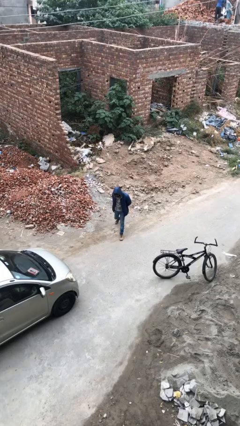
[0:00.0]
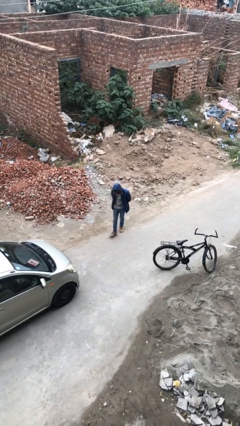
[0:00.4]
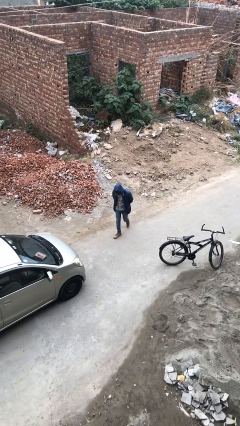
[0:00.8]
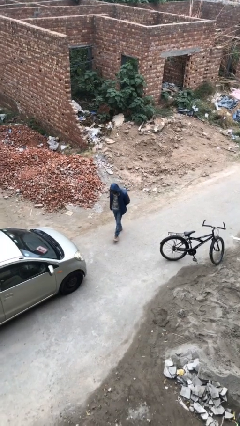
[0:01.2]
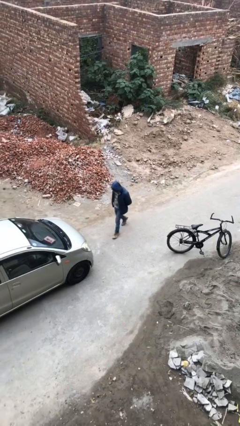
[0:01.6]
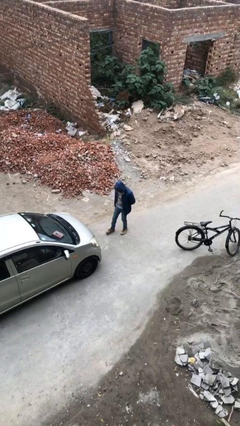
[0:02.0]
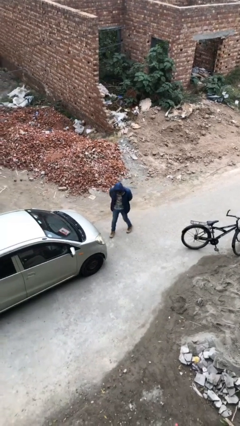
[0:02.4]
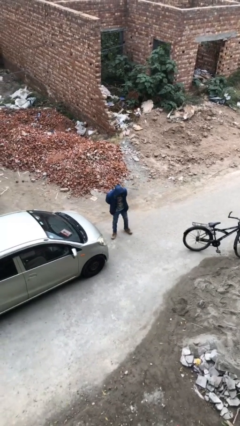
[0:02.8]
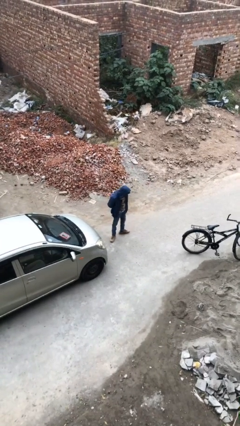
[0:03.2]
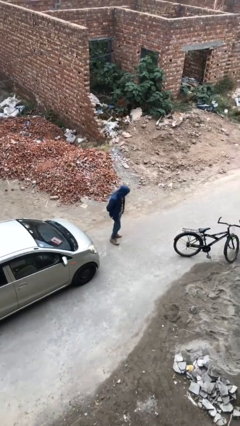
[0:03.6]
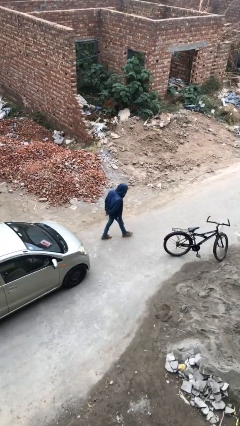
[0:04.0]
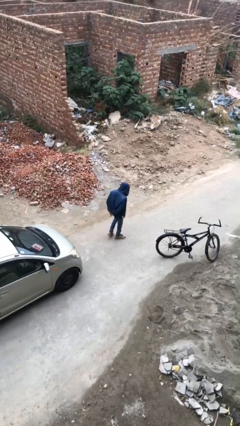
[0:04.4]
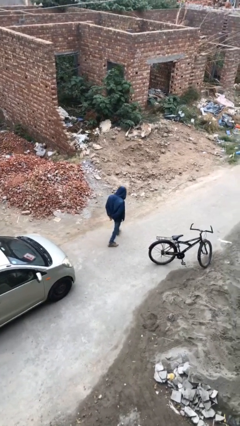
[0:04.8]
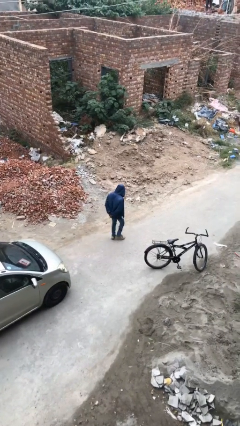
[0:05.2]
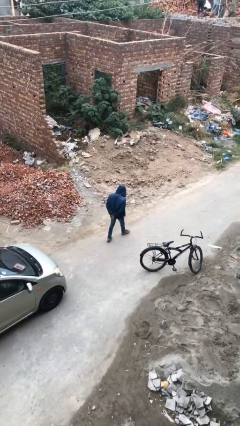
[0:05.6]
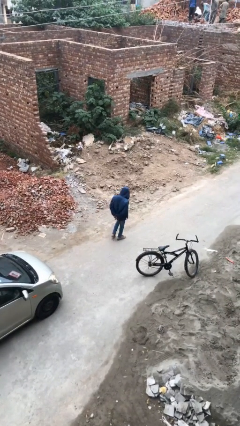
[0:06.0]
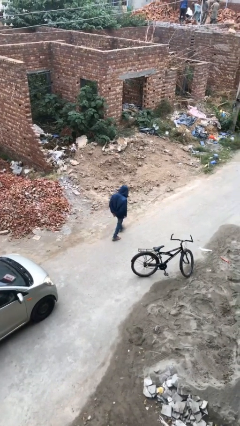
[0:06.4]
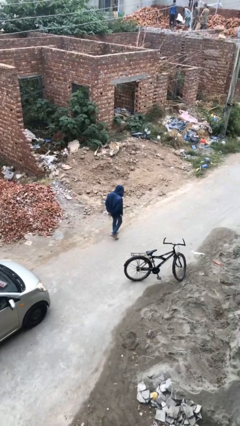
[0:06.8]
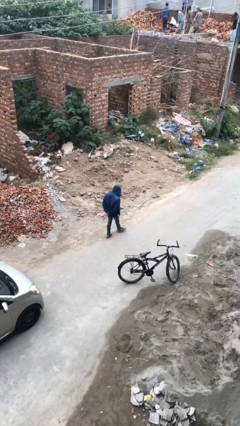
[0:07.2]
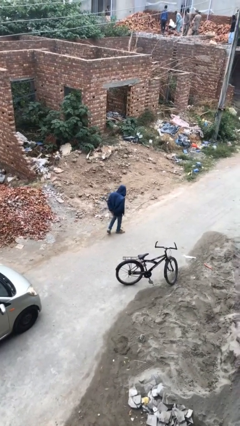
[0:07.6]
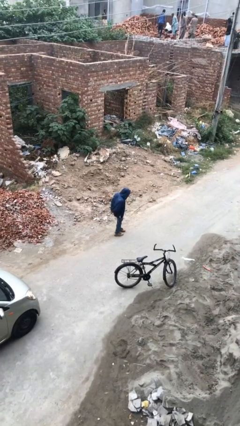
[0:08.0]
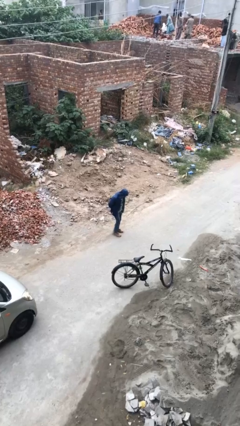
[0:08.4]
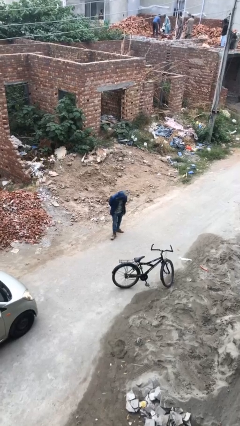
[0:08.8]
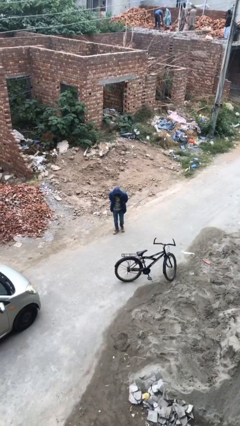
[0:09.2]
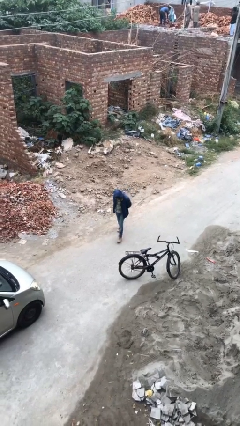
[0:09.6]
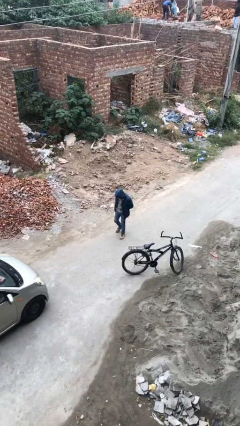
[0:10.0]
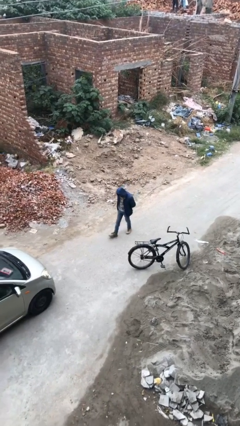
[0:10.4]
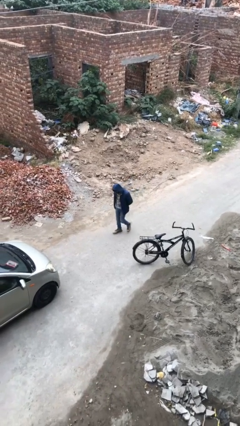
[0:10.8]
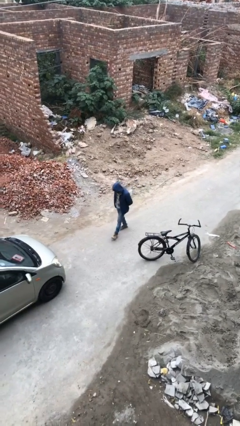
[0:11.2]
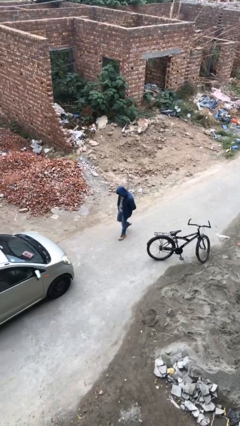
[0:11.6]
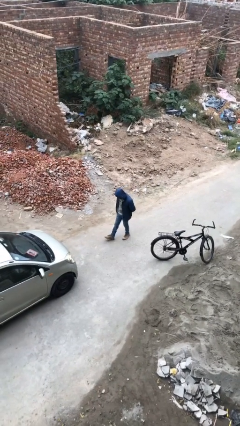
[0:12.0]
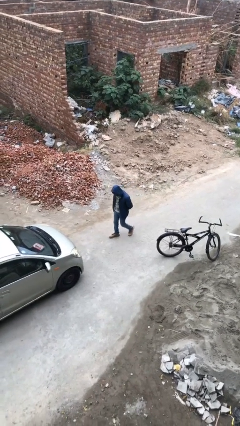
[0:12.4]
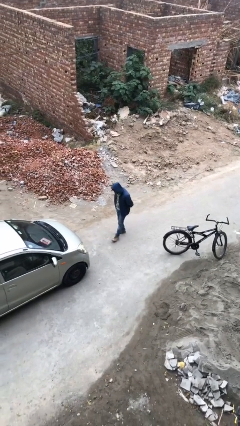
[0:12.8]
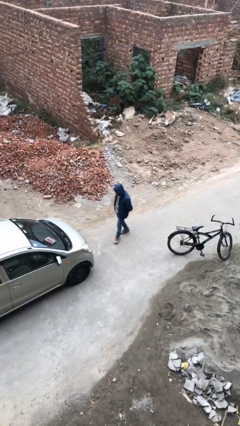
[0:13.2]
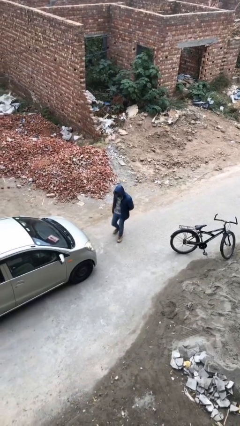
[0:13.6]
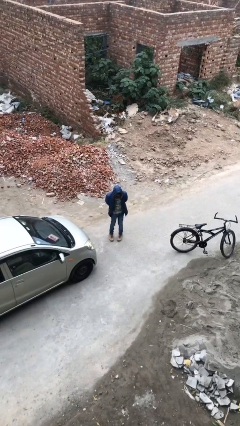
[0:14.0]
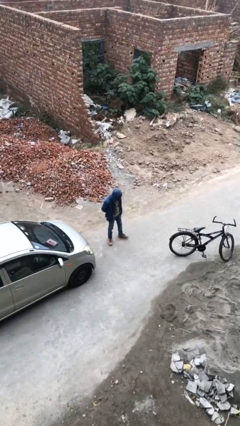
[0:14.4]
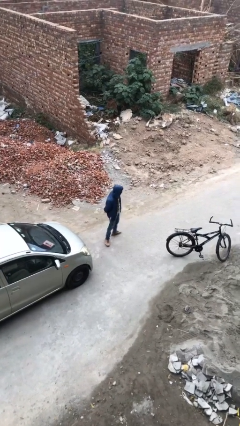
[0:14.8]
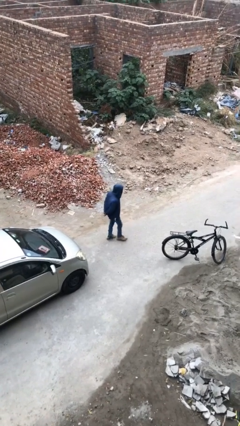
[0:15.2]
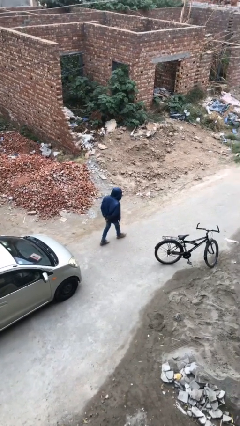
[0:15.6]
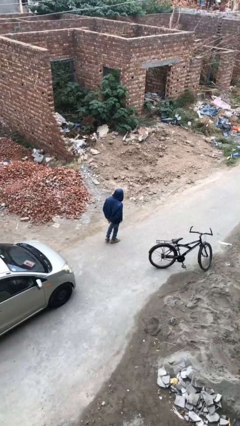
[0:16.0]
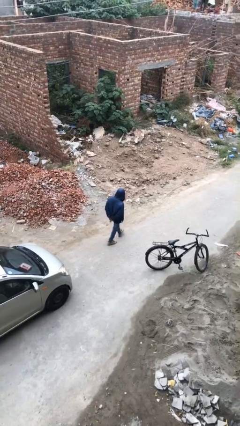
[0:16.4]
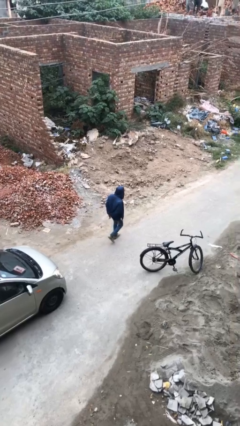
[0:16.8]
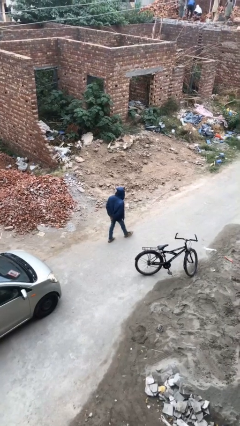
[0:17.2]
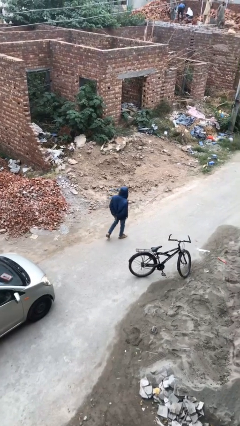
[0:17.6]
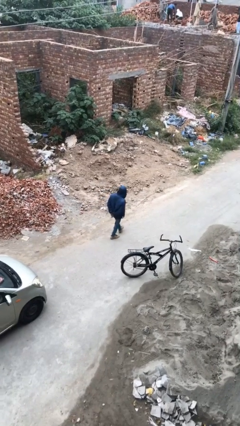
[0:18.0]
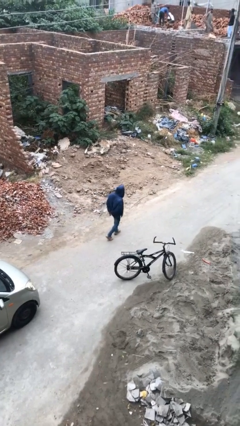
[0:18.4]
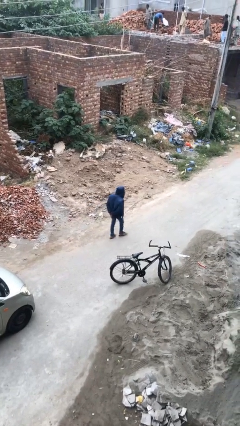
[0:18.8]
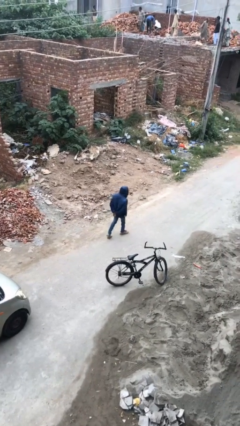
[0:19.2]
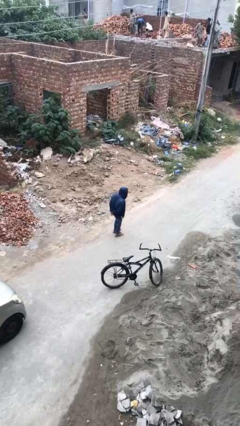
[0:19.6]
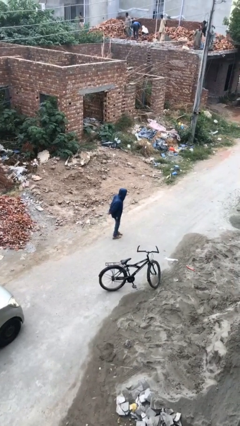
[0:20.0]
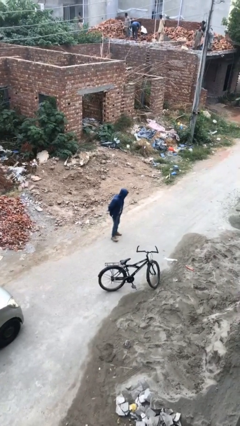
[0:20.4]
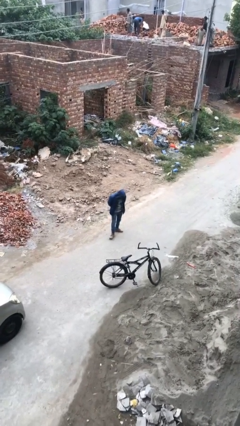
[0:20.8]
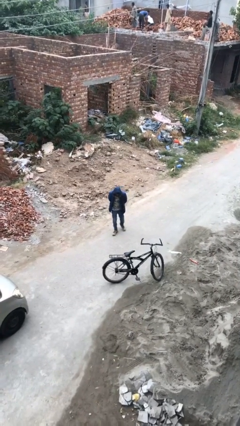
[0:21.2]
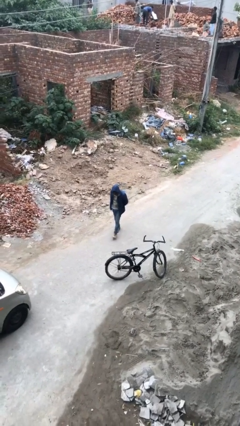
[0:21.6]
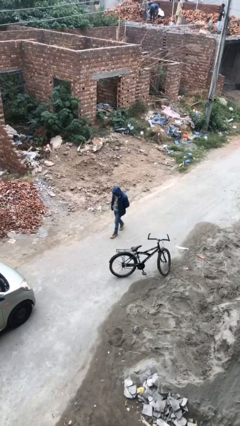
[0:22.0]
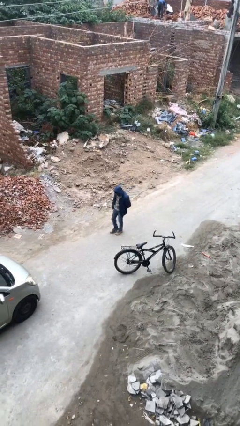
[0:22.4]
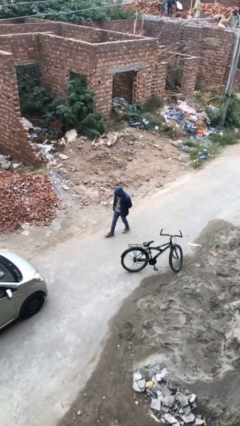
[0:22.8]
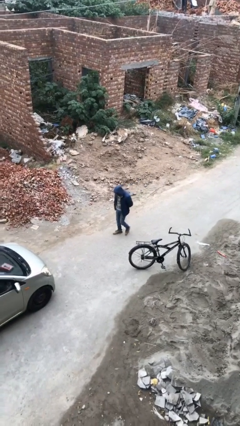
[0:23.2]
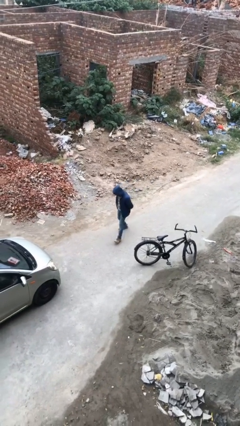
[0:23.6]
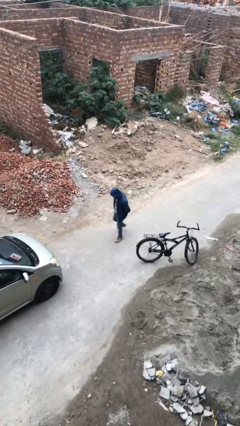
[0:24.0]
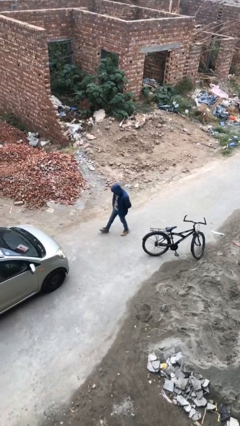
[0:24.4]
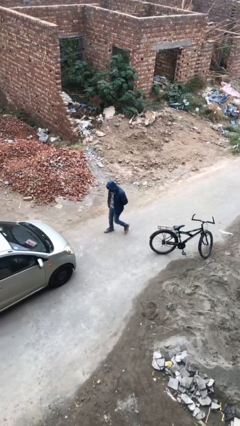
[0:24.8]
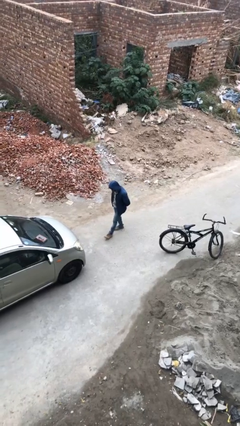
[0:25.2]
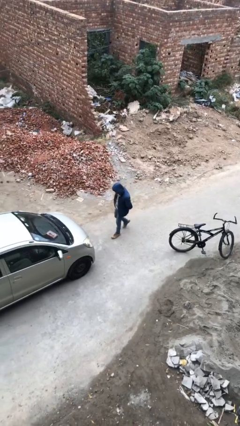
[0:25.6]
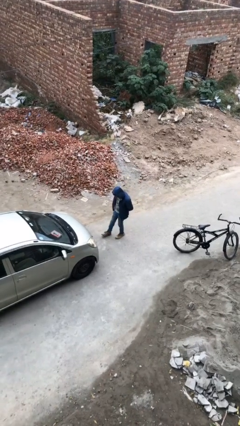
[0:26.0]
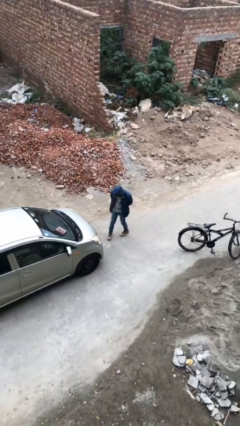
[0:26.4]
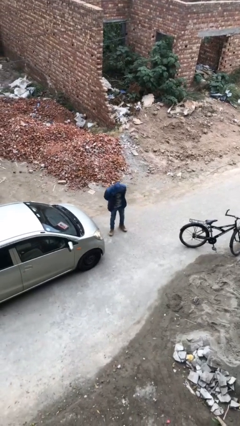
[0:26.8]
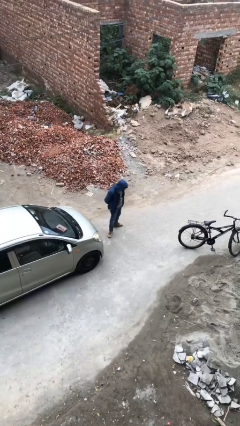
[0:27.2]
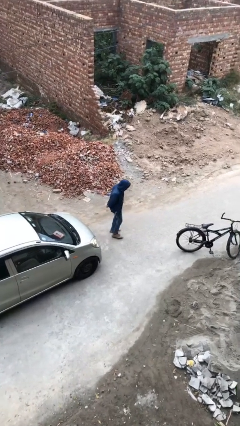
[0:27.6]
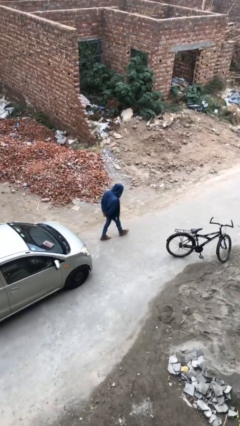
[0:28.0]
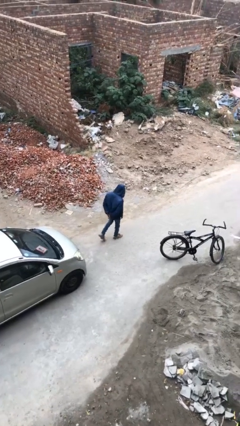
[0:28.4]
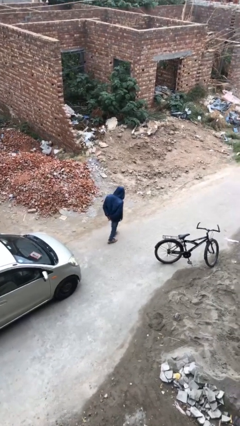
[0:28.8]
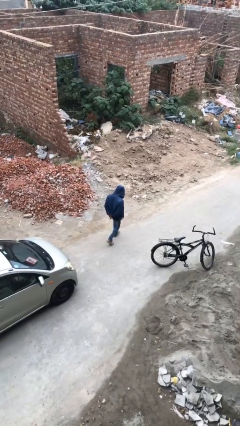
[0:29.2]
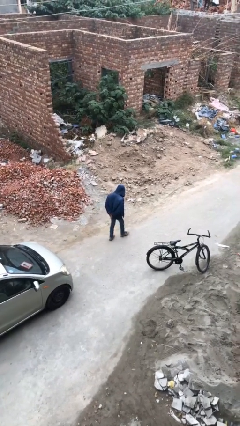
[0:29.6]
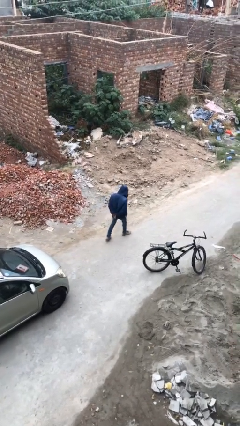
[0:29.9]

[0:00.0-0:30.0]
person walks

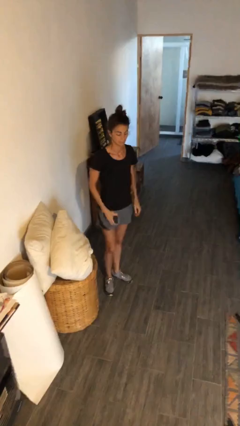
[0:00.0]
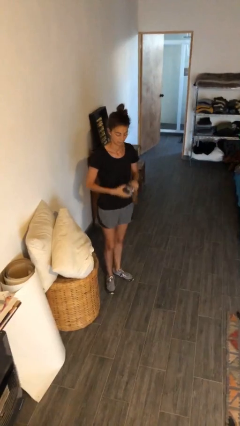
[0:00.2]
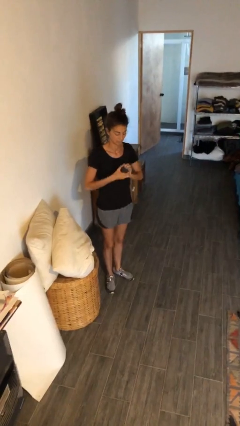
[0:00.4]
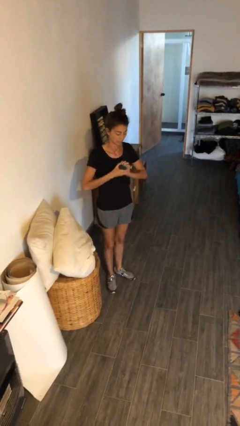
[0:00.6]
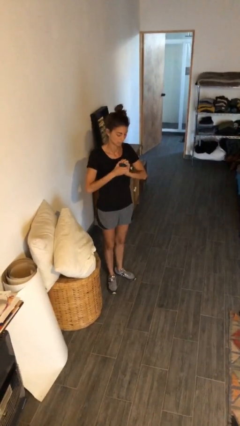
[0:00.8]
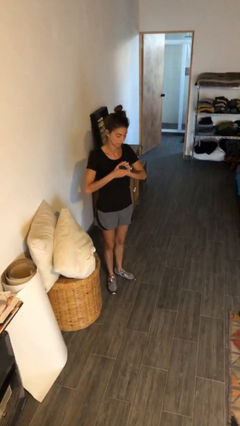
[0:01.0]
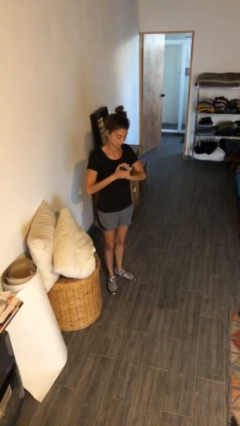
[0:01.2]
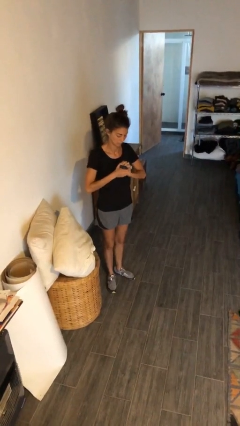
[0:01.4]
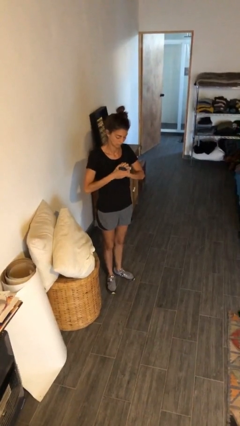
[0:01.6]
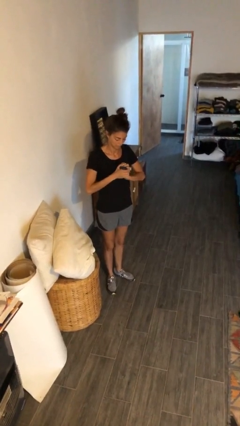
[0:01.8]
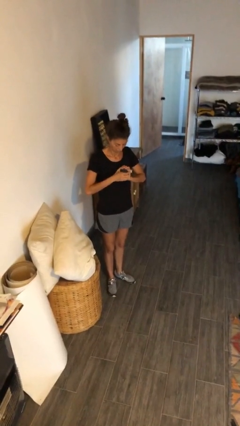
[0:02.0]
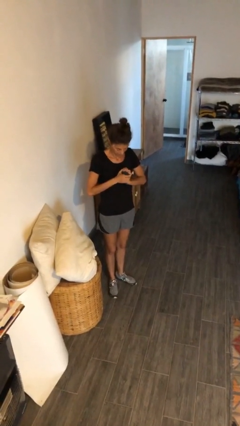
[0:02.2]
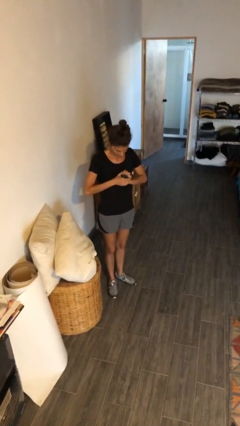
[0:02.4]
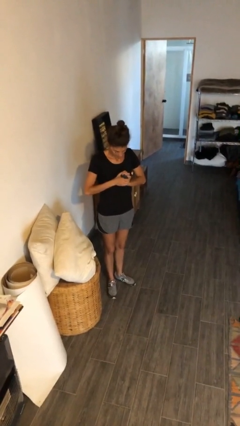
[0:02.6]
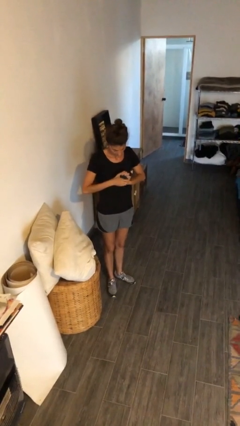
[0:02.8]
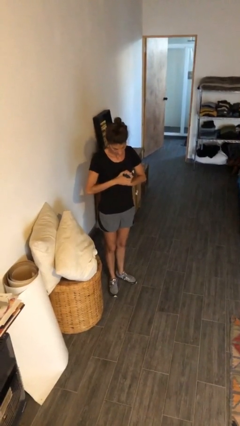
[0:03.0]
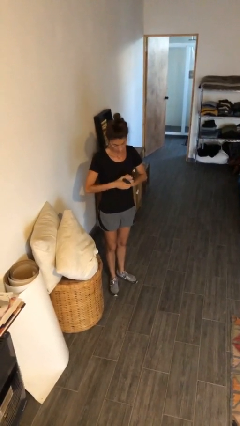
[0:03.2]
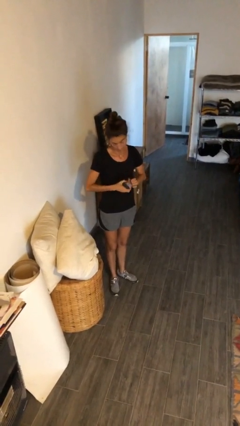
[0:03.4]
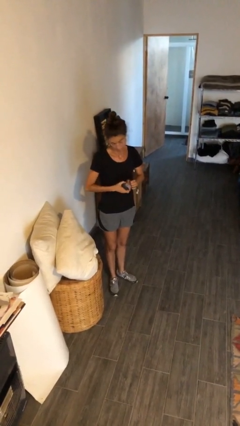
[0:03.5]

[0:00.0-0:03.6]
person squeezes object
